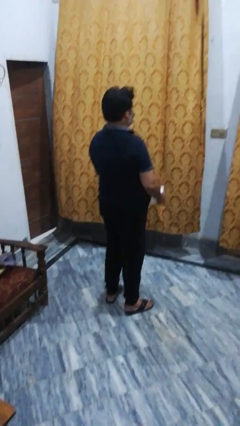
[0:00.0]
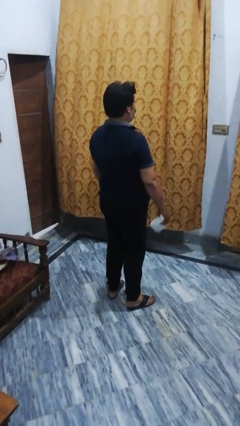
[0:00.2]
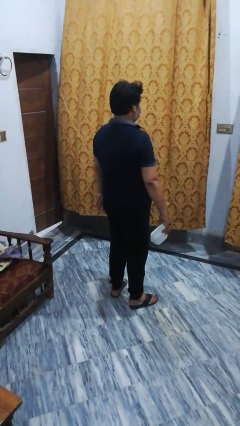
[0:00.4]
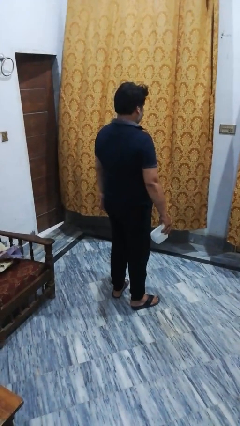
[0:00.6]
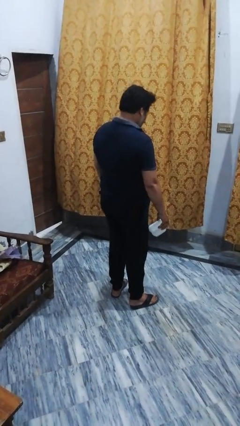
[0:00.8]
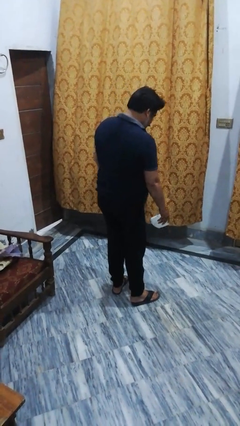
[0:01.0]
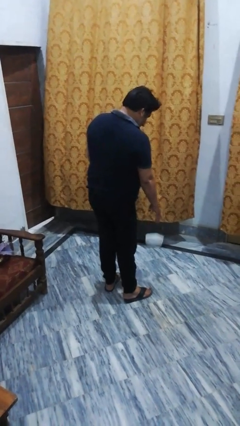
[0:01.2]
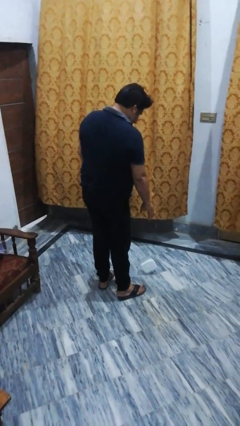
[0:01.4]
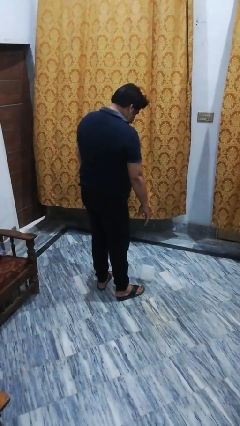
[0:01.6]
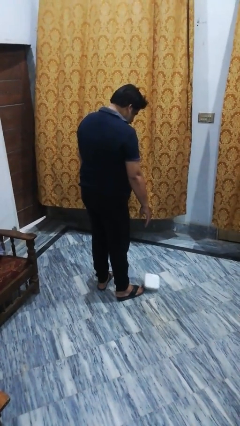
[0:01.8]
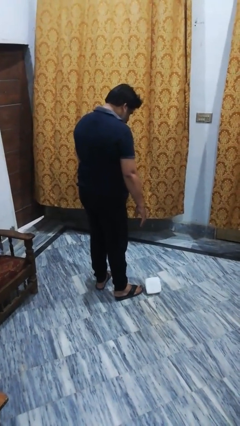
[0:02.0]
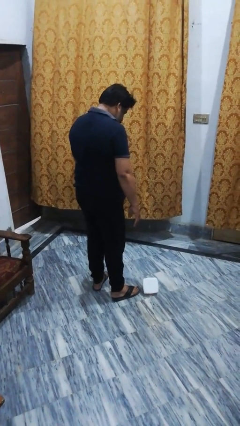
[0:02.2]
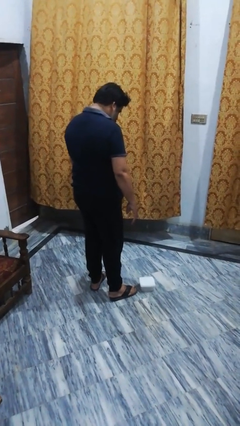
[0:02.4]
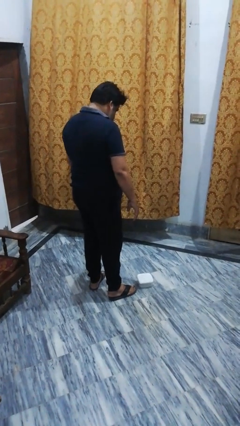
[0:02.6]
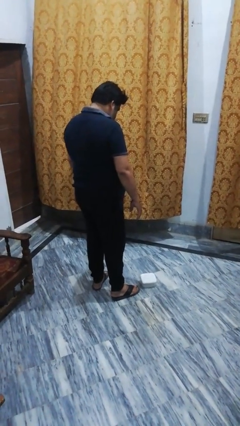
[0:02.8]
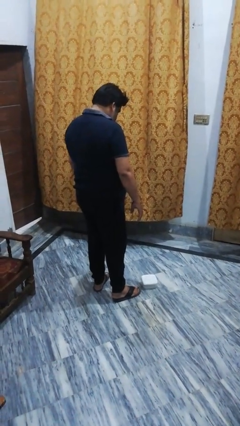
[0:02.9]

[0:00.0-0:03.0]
person throws object to ground

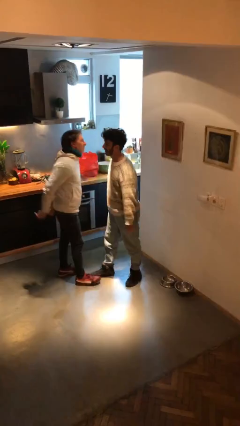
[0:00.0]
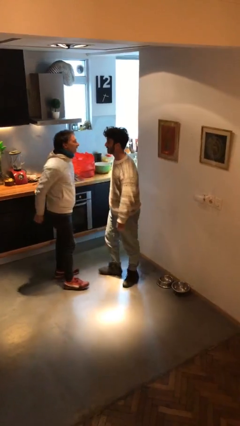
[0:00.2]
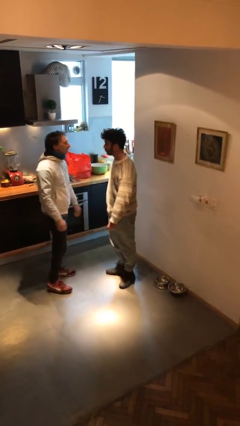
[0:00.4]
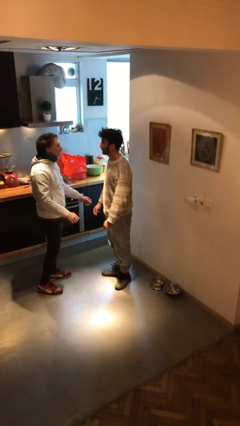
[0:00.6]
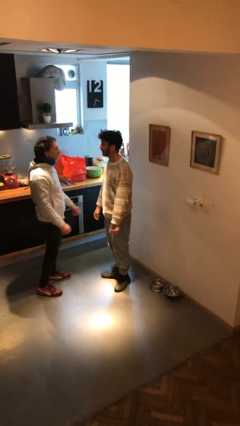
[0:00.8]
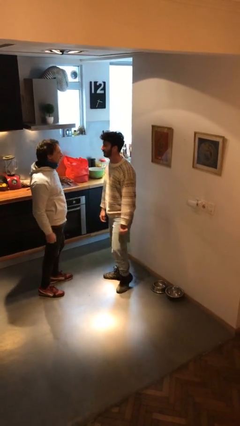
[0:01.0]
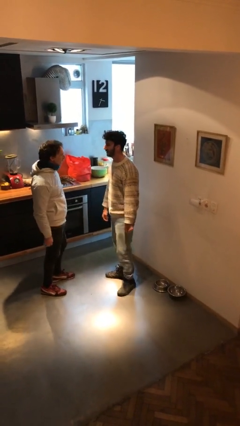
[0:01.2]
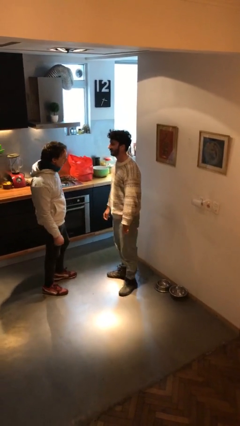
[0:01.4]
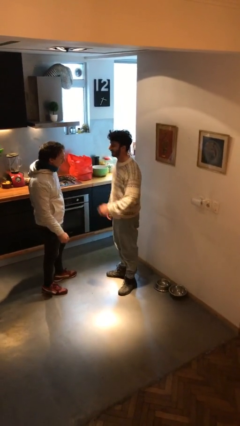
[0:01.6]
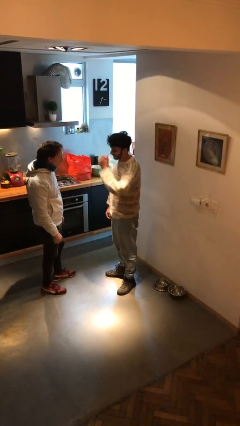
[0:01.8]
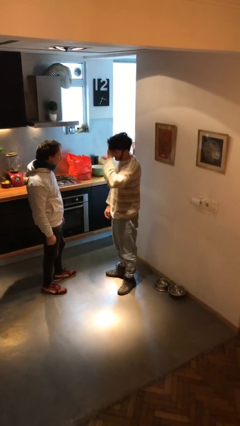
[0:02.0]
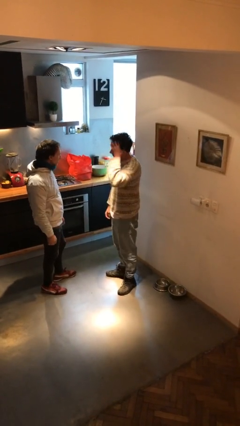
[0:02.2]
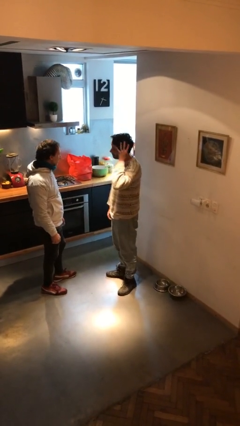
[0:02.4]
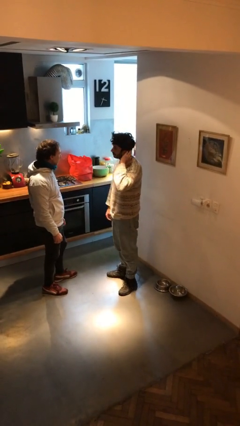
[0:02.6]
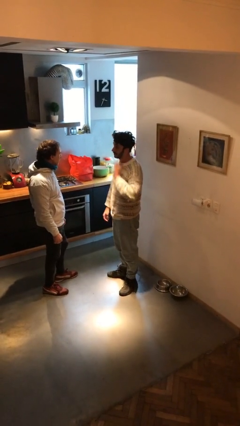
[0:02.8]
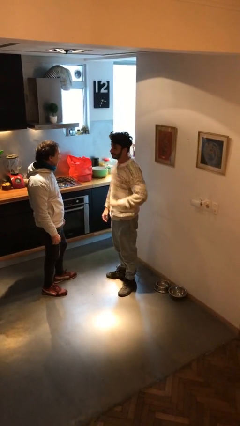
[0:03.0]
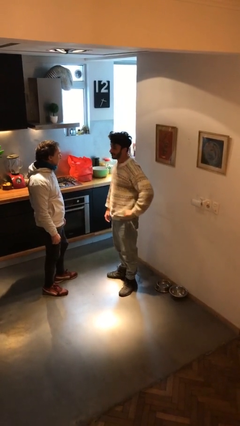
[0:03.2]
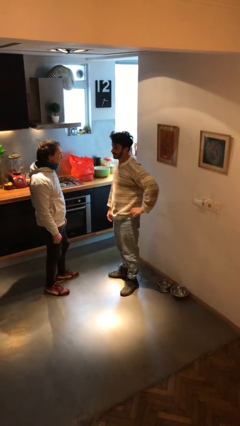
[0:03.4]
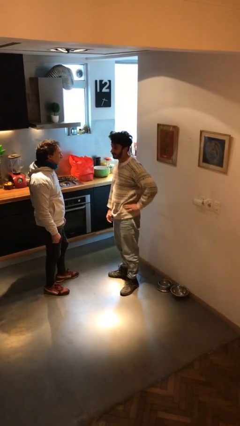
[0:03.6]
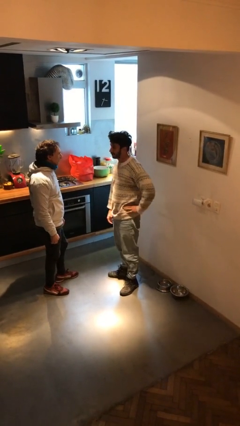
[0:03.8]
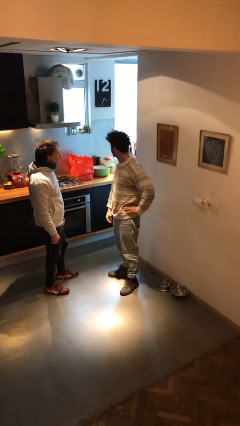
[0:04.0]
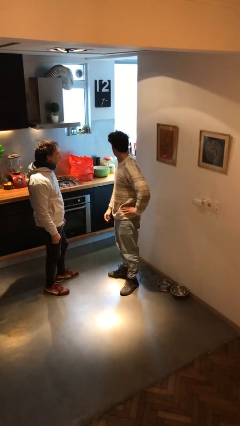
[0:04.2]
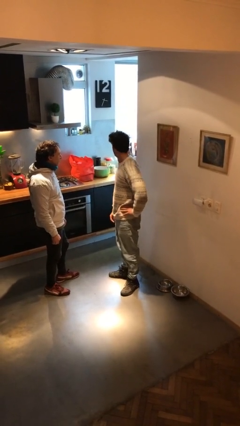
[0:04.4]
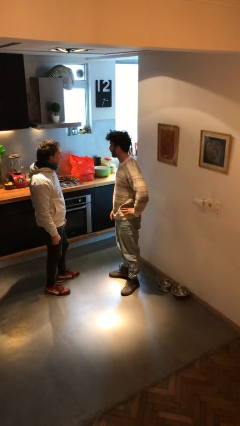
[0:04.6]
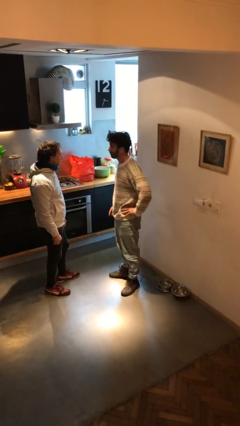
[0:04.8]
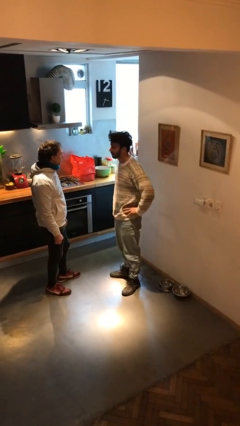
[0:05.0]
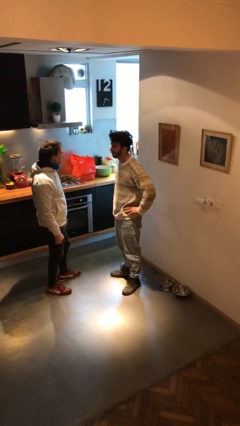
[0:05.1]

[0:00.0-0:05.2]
person talks to person

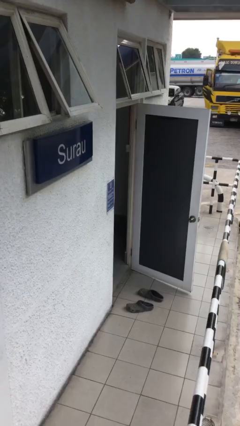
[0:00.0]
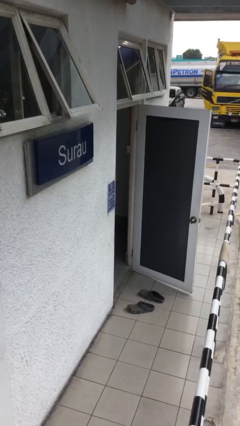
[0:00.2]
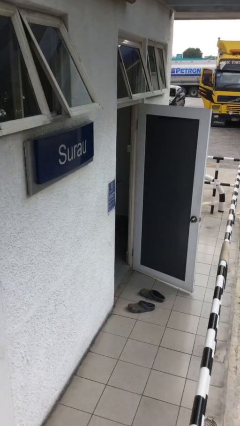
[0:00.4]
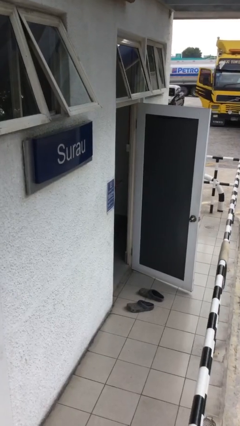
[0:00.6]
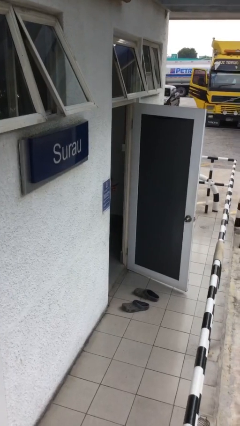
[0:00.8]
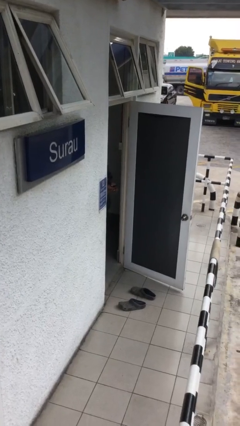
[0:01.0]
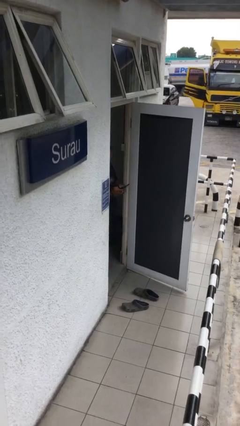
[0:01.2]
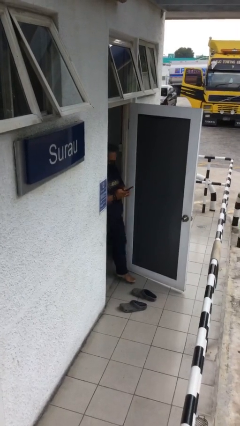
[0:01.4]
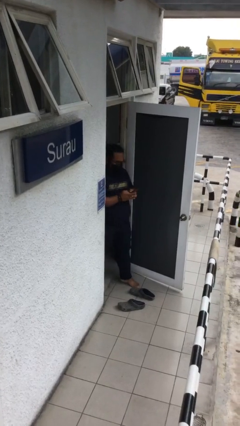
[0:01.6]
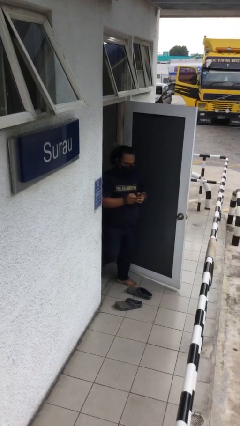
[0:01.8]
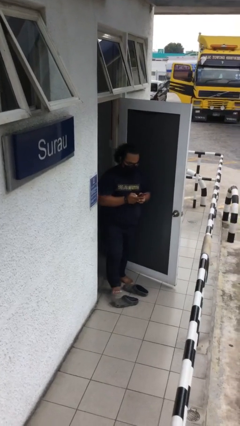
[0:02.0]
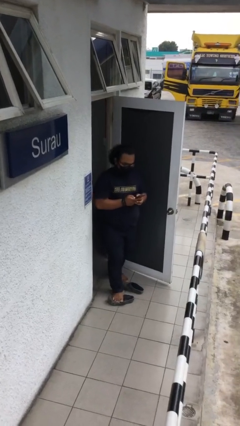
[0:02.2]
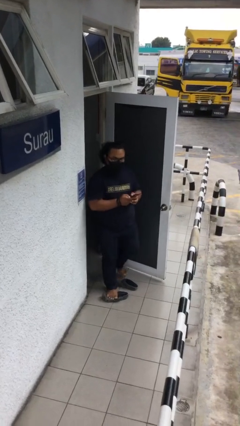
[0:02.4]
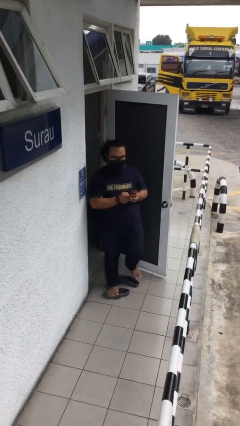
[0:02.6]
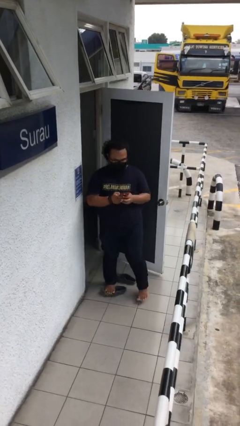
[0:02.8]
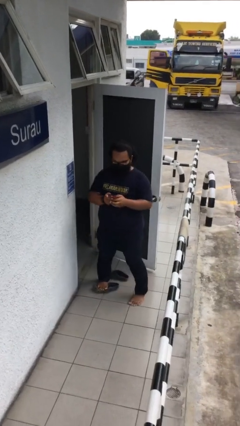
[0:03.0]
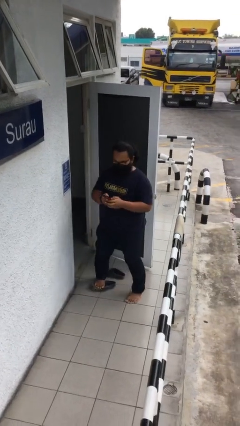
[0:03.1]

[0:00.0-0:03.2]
person enters scene through structure

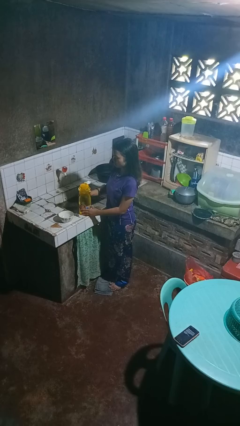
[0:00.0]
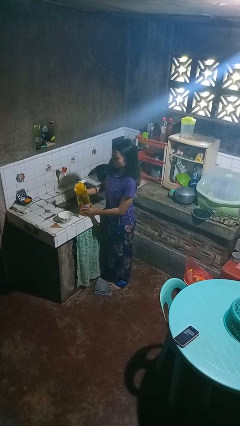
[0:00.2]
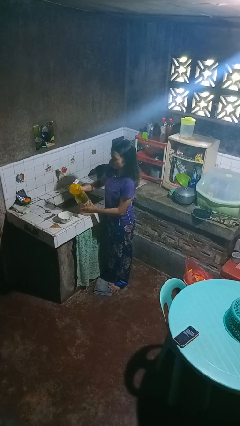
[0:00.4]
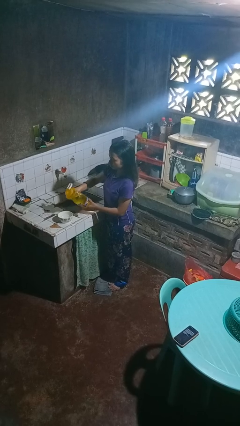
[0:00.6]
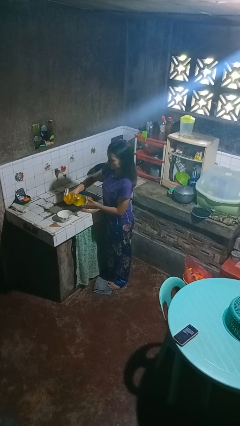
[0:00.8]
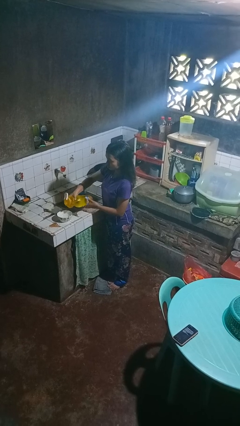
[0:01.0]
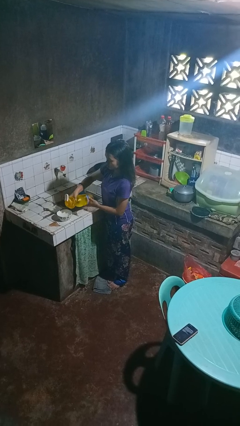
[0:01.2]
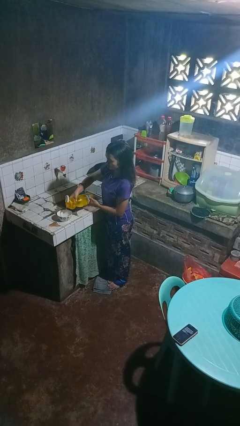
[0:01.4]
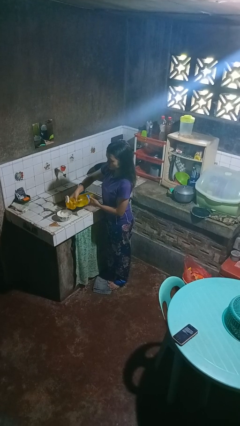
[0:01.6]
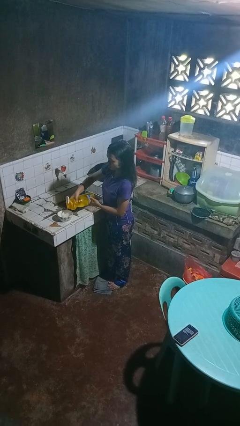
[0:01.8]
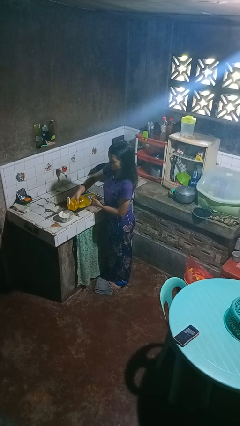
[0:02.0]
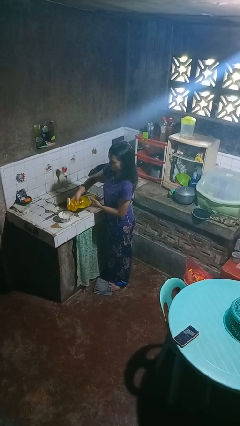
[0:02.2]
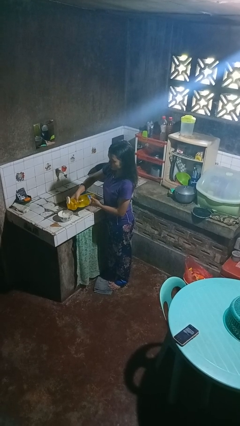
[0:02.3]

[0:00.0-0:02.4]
person pours into bowl

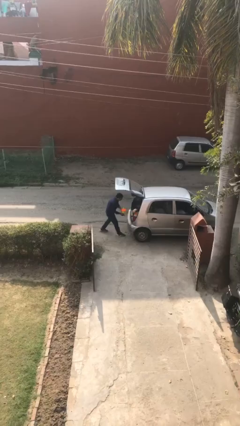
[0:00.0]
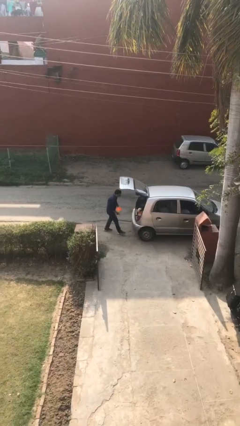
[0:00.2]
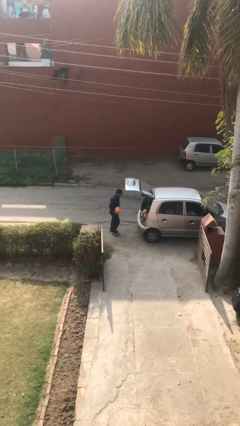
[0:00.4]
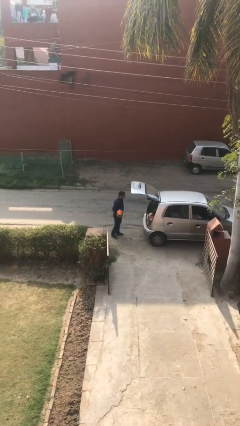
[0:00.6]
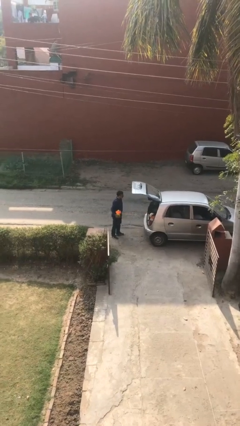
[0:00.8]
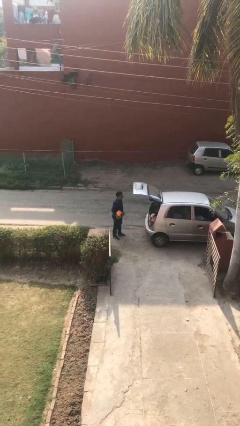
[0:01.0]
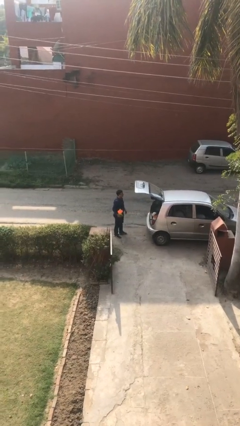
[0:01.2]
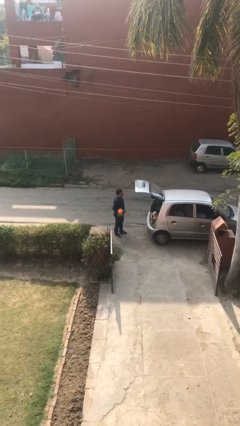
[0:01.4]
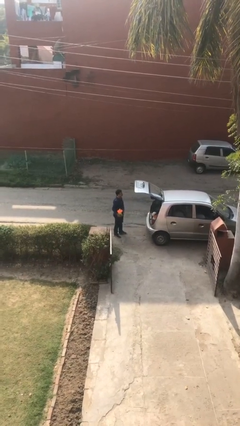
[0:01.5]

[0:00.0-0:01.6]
person unloads car

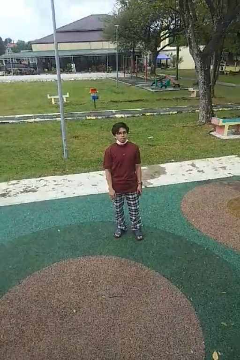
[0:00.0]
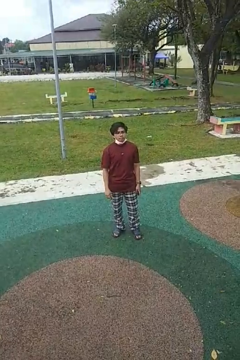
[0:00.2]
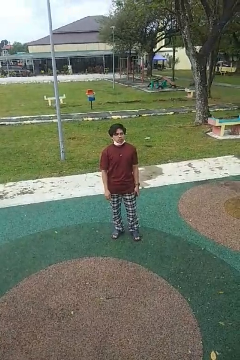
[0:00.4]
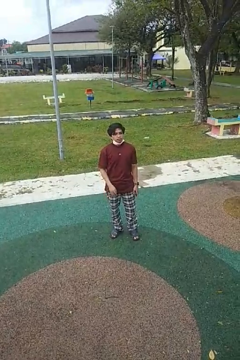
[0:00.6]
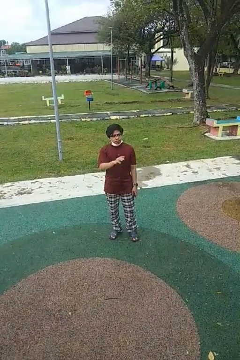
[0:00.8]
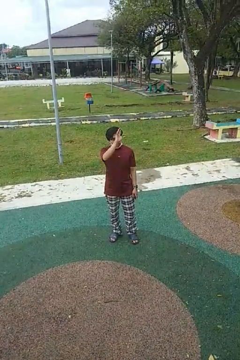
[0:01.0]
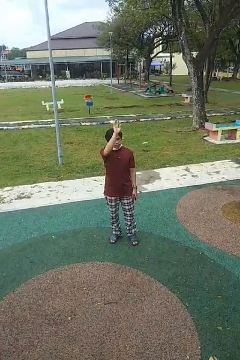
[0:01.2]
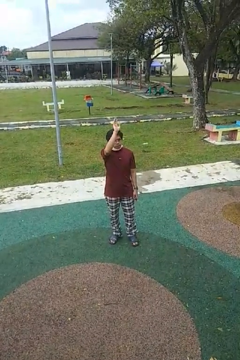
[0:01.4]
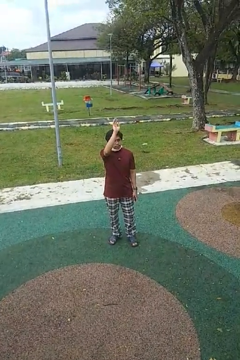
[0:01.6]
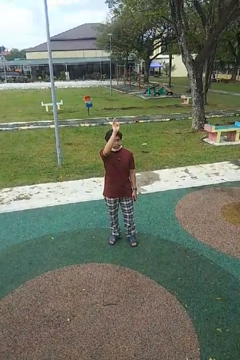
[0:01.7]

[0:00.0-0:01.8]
person gestures raise hand
